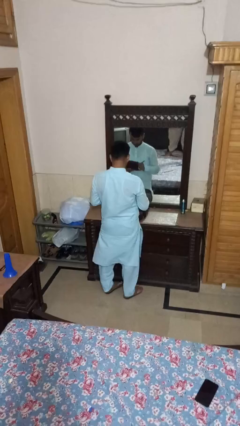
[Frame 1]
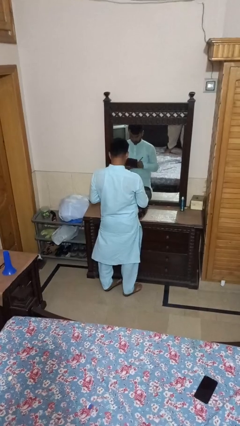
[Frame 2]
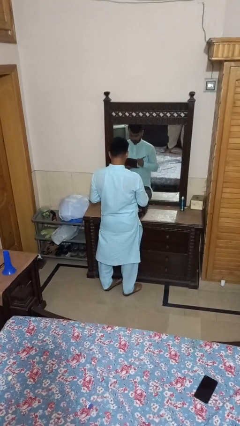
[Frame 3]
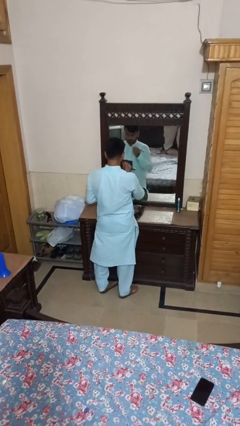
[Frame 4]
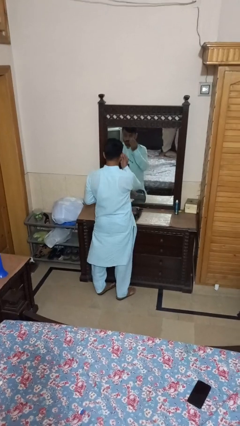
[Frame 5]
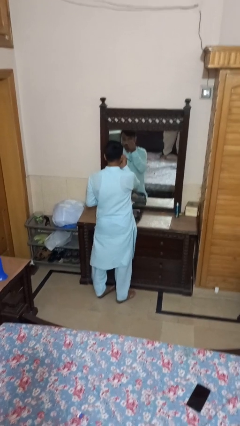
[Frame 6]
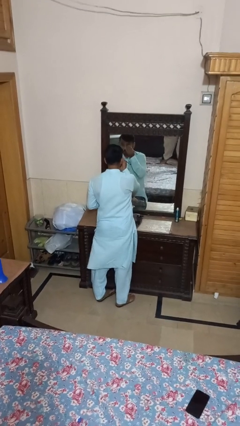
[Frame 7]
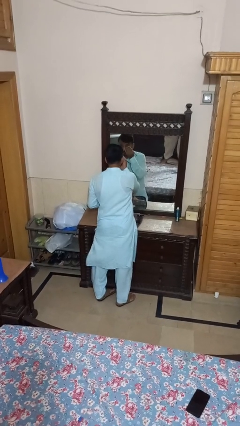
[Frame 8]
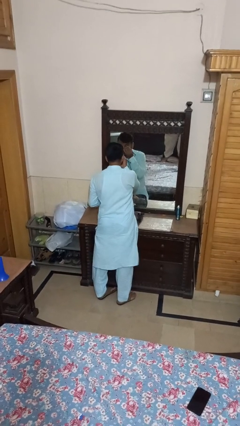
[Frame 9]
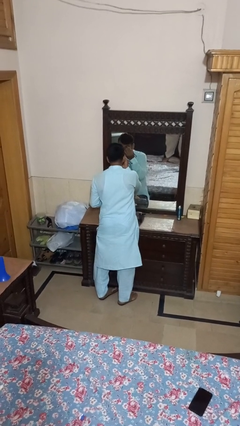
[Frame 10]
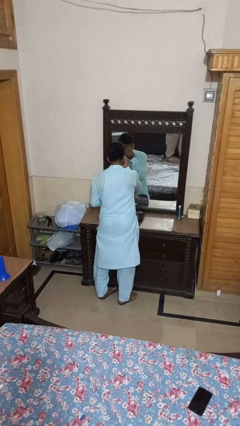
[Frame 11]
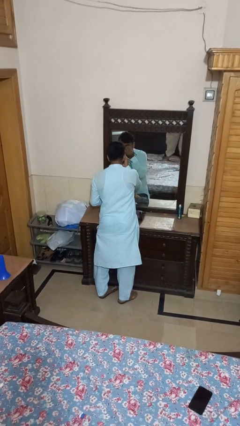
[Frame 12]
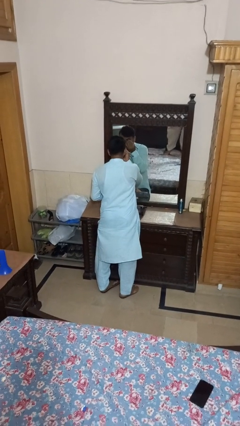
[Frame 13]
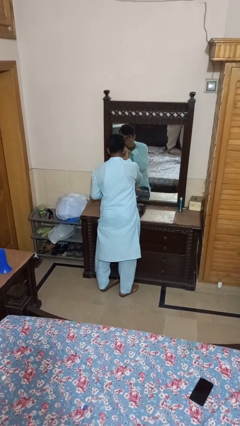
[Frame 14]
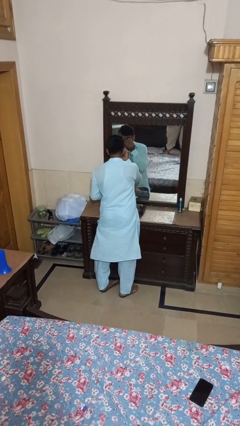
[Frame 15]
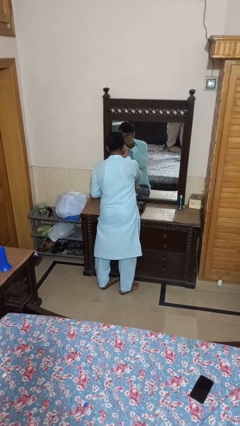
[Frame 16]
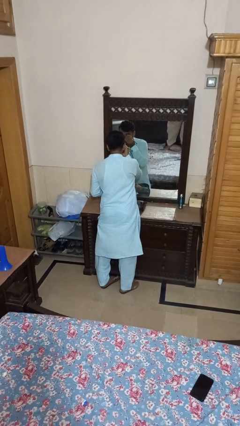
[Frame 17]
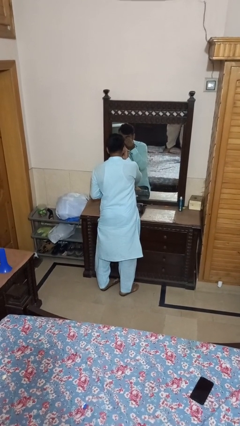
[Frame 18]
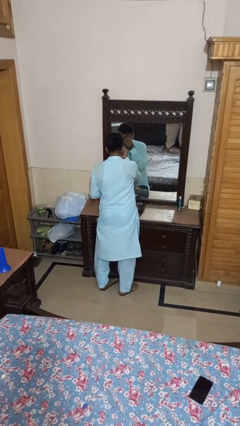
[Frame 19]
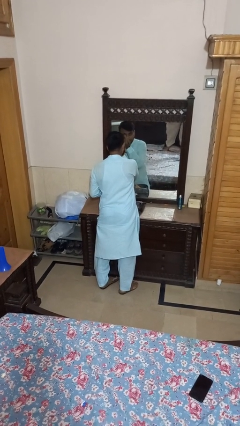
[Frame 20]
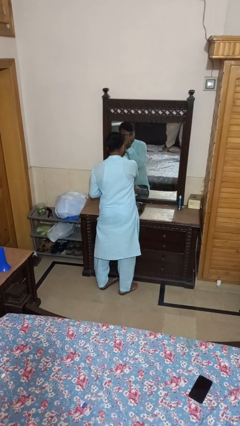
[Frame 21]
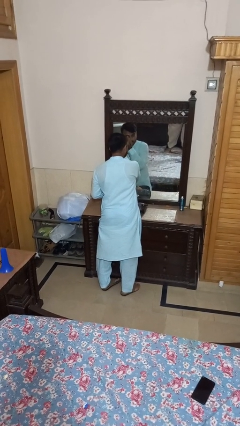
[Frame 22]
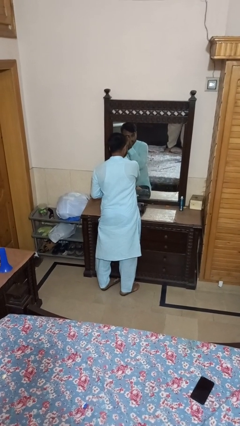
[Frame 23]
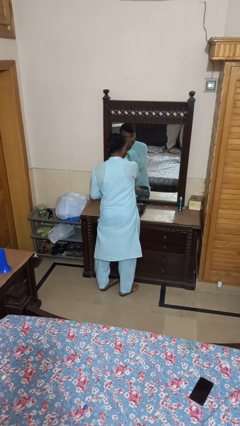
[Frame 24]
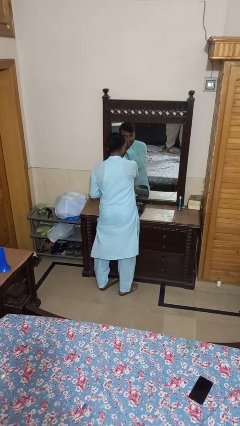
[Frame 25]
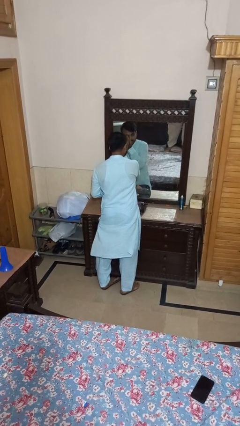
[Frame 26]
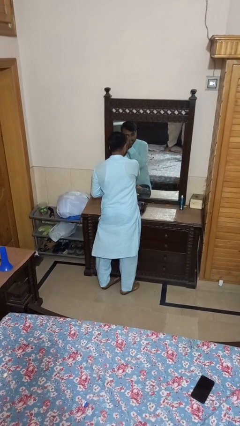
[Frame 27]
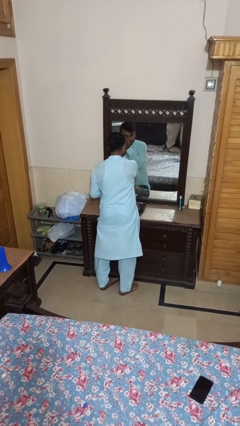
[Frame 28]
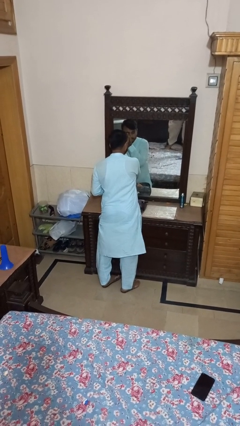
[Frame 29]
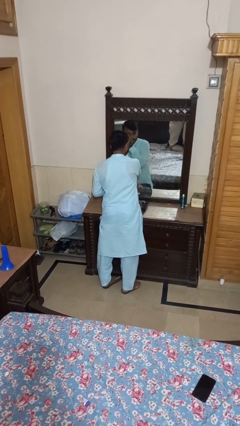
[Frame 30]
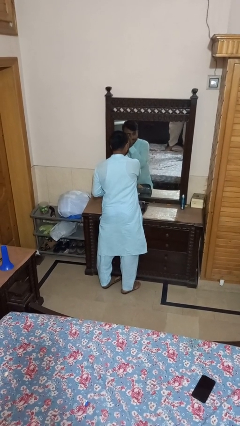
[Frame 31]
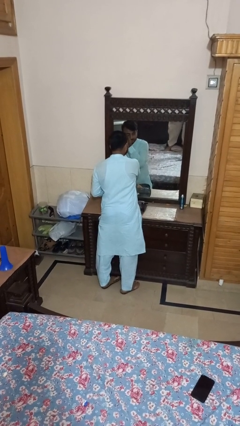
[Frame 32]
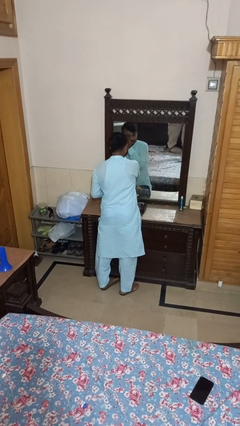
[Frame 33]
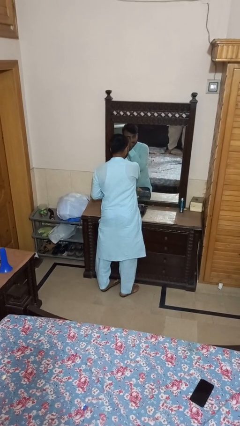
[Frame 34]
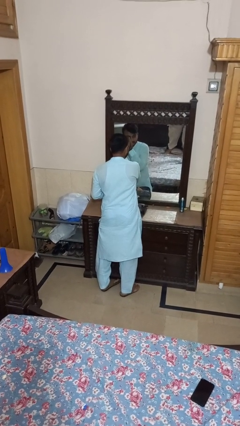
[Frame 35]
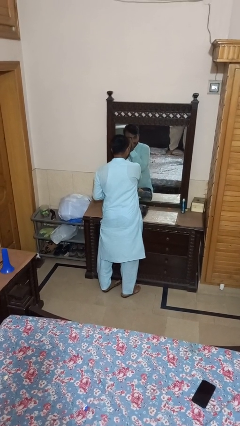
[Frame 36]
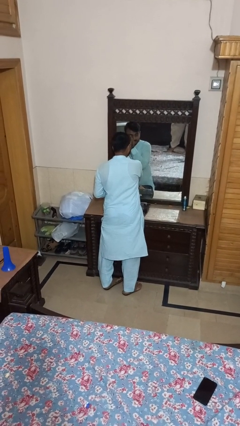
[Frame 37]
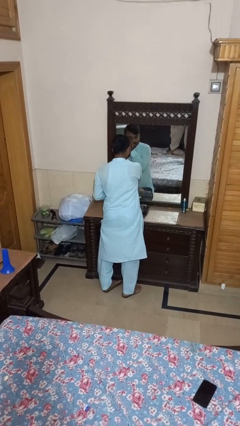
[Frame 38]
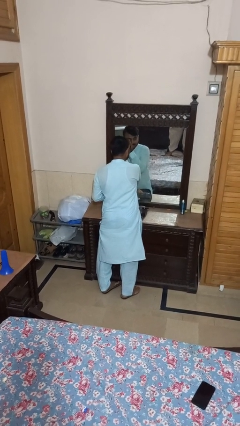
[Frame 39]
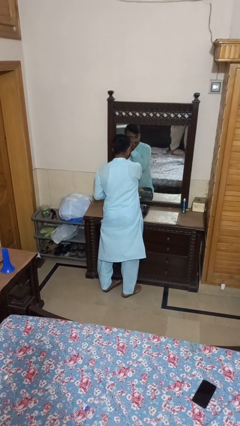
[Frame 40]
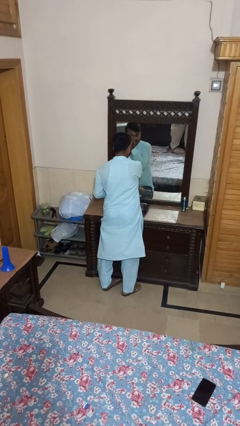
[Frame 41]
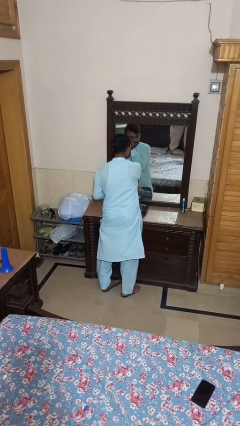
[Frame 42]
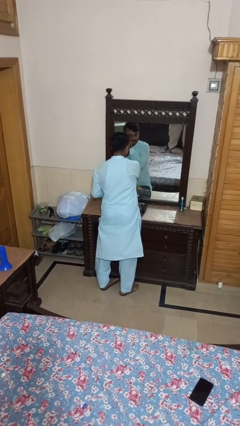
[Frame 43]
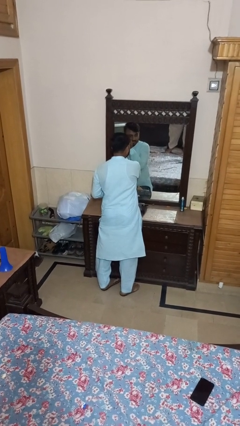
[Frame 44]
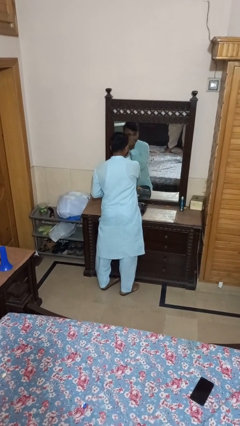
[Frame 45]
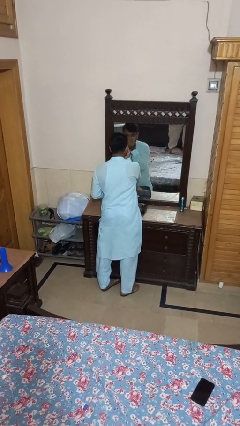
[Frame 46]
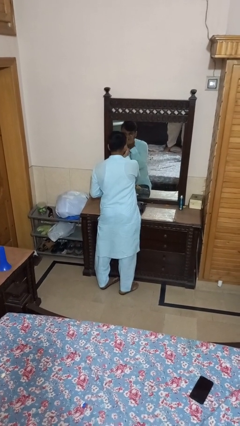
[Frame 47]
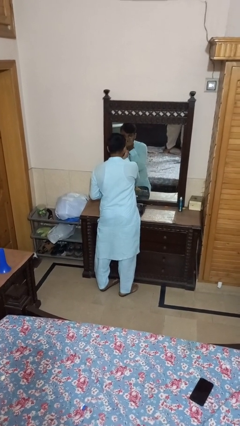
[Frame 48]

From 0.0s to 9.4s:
person applies eye makeup

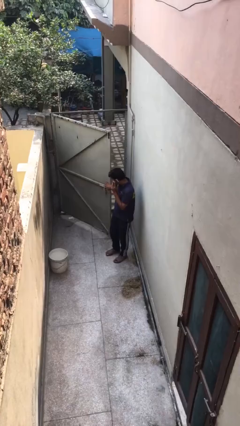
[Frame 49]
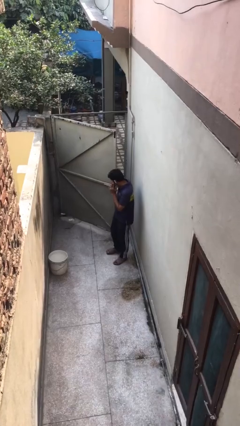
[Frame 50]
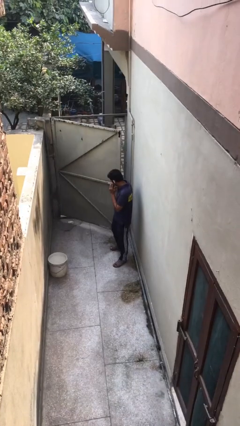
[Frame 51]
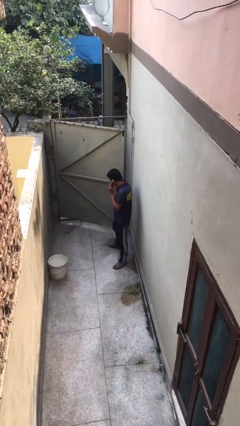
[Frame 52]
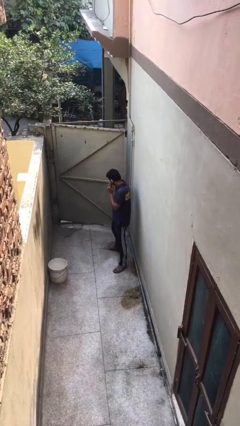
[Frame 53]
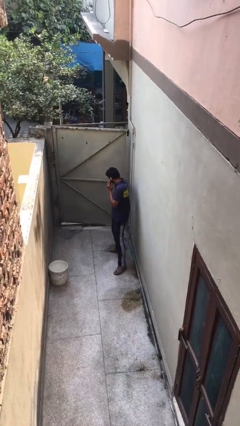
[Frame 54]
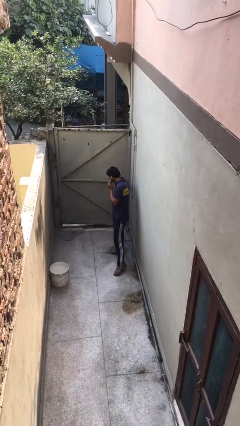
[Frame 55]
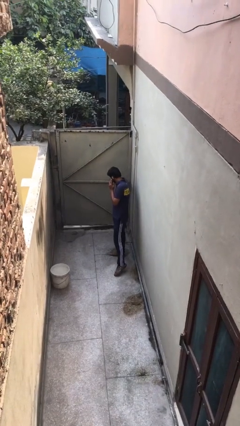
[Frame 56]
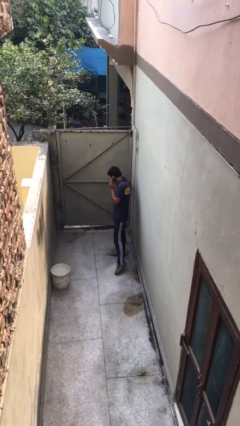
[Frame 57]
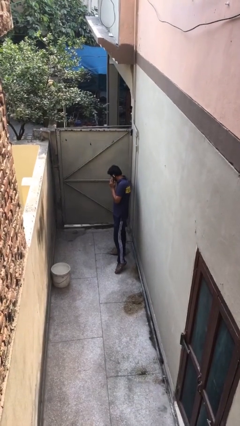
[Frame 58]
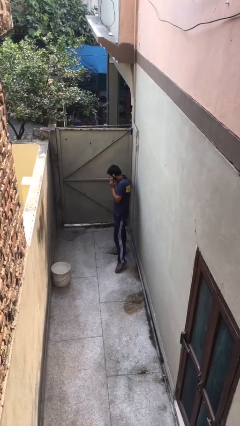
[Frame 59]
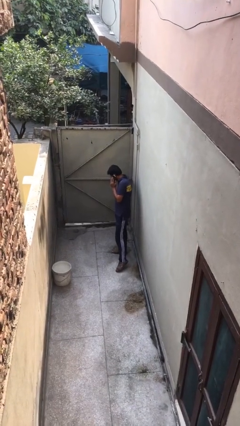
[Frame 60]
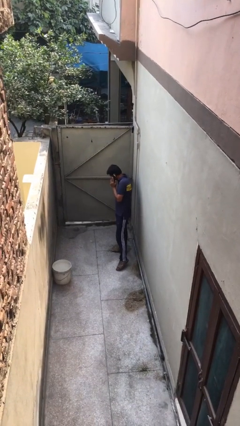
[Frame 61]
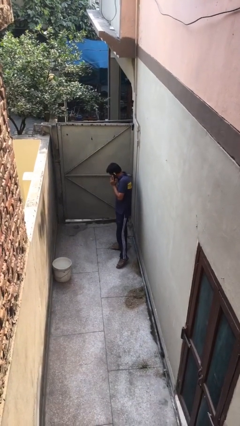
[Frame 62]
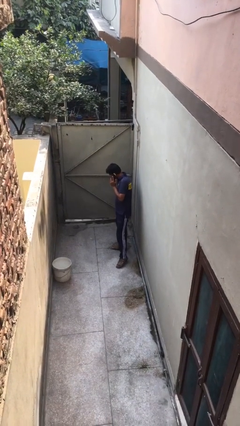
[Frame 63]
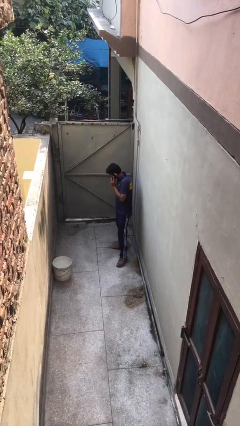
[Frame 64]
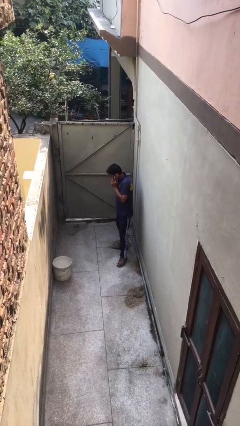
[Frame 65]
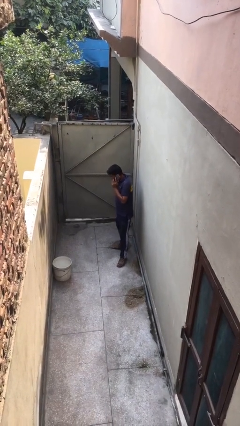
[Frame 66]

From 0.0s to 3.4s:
person closes facility door

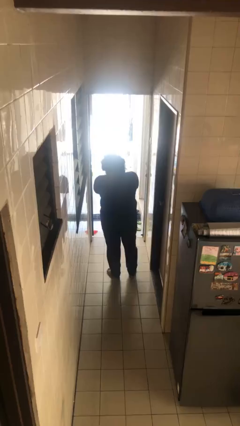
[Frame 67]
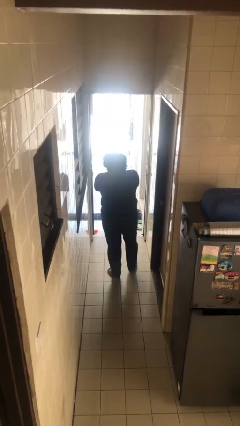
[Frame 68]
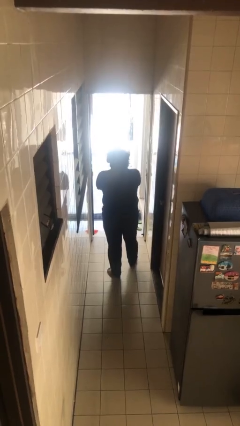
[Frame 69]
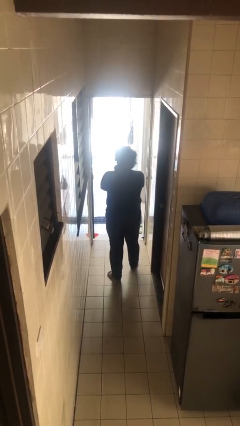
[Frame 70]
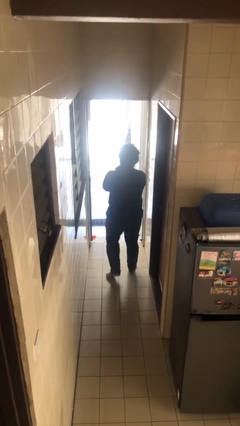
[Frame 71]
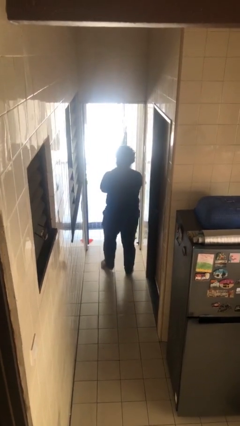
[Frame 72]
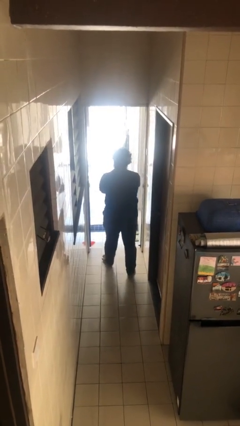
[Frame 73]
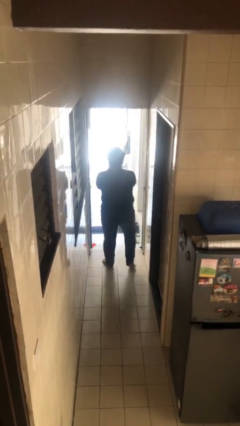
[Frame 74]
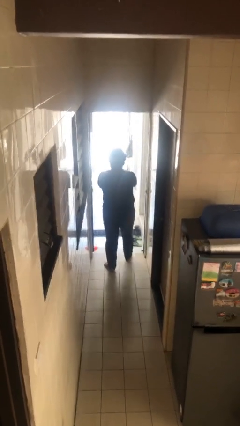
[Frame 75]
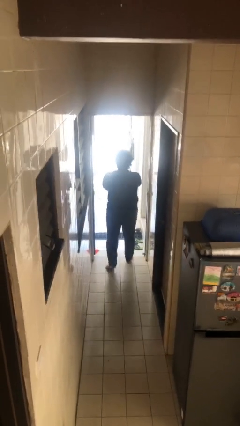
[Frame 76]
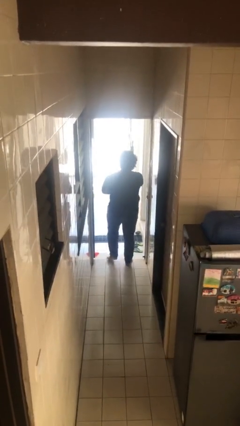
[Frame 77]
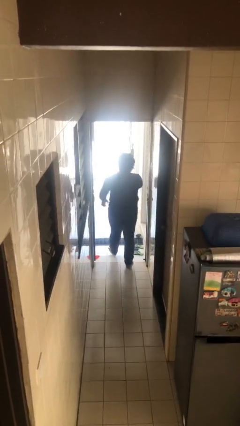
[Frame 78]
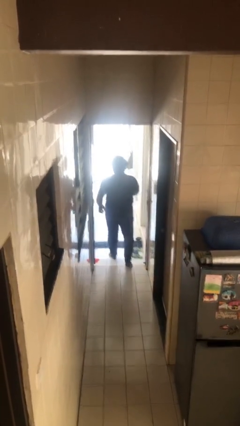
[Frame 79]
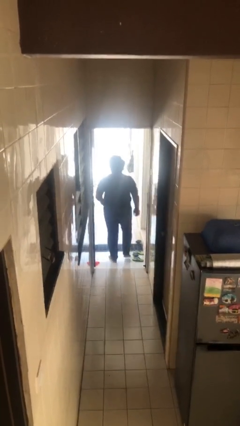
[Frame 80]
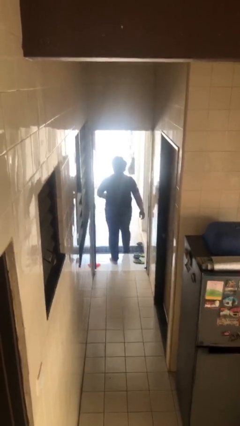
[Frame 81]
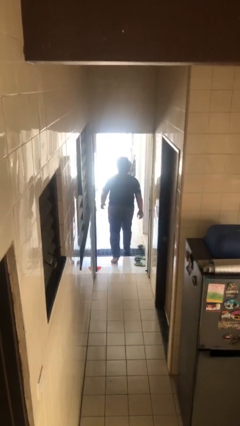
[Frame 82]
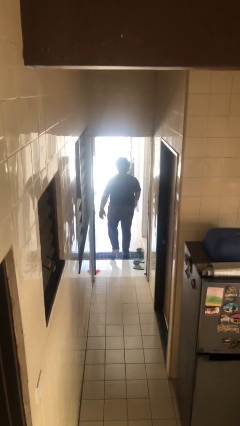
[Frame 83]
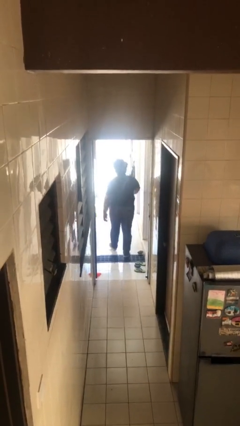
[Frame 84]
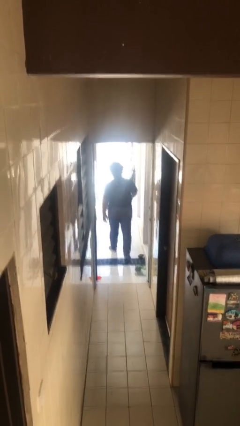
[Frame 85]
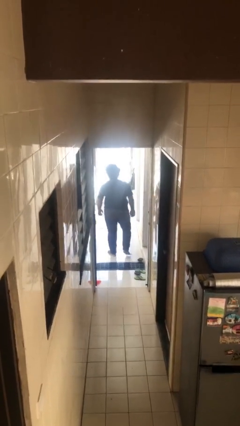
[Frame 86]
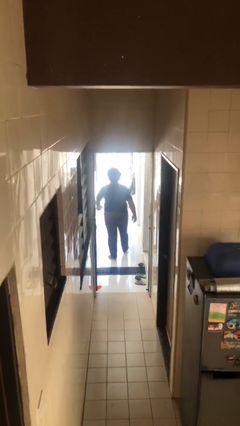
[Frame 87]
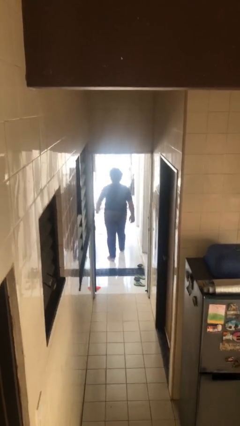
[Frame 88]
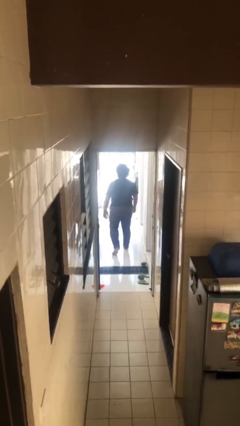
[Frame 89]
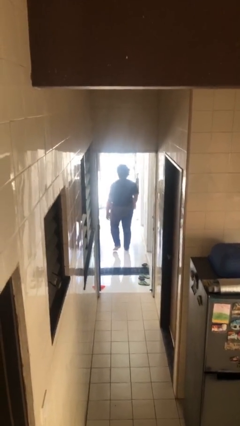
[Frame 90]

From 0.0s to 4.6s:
person exits scene through structure

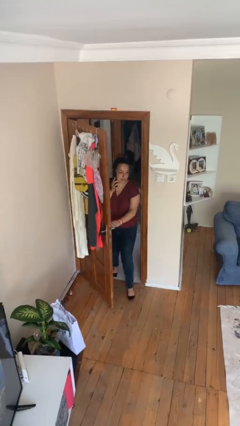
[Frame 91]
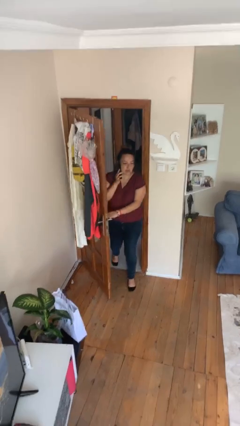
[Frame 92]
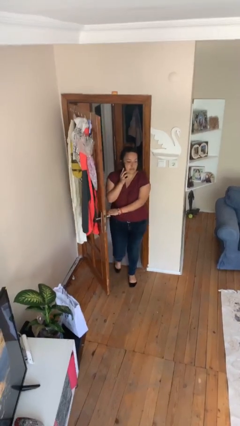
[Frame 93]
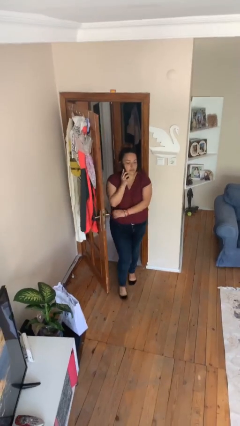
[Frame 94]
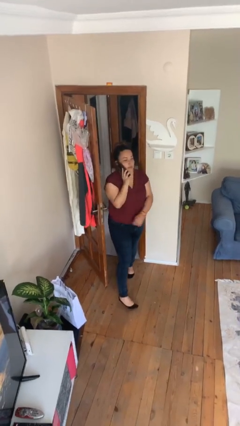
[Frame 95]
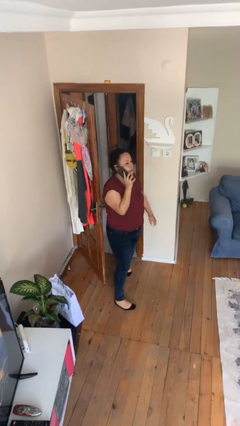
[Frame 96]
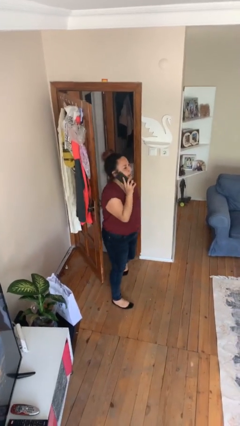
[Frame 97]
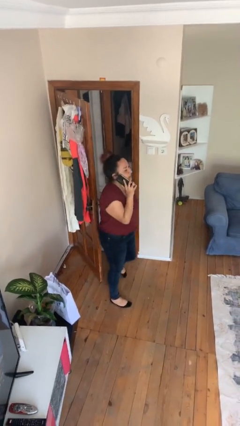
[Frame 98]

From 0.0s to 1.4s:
person enters scene through structure
